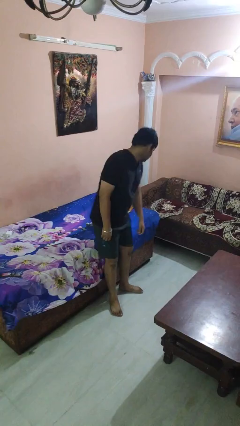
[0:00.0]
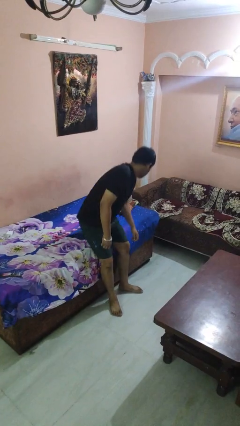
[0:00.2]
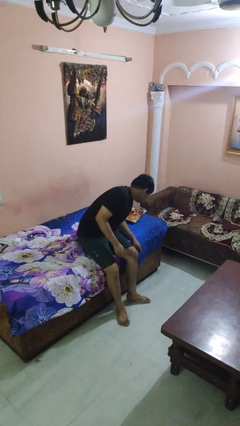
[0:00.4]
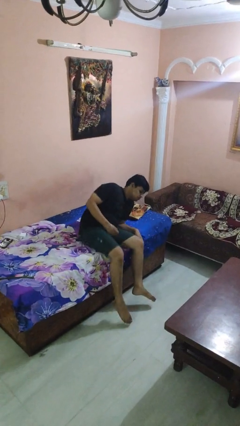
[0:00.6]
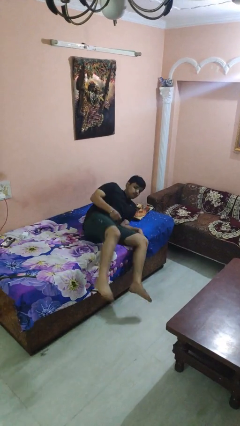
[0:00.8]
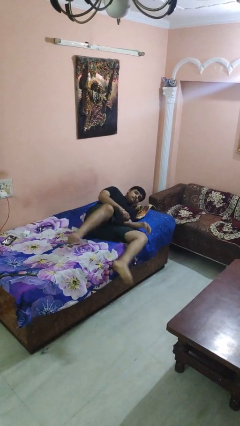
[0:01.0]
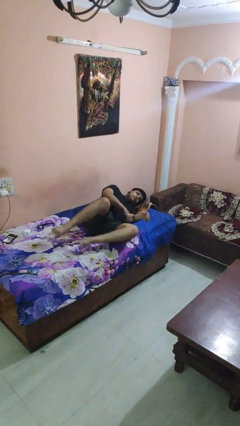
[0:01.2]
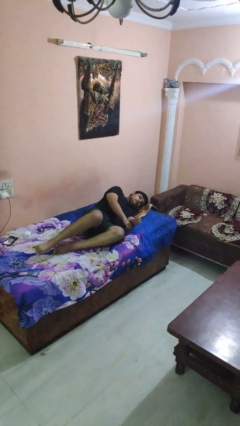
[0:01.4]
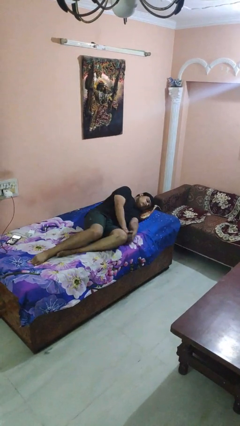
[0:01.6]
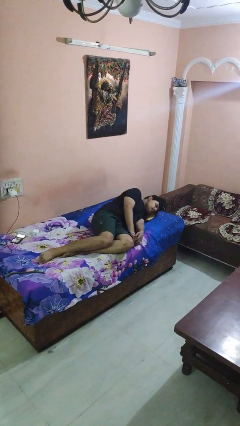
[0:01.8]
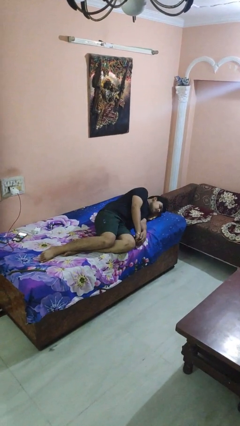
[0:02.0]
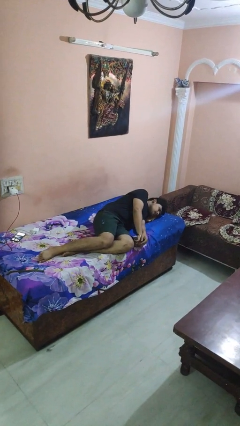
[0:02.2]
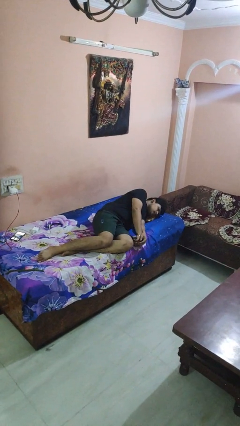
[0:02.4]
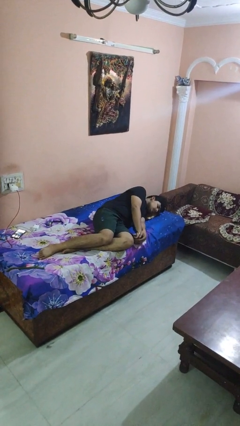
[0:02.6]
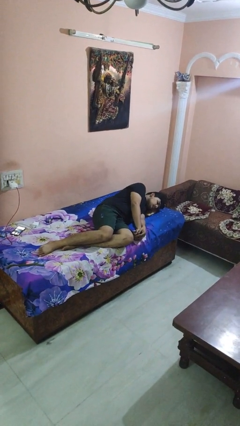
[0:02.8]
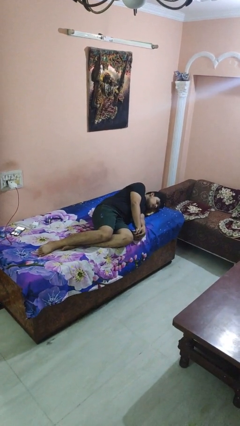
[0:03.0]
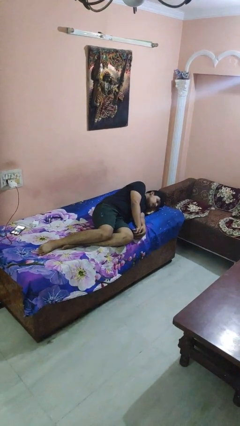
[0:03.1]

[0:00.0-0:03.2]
person lies down on bed

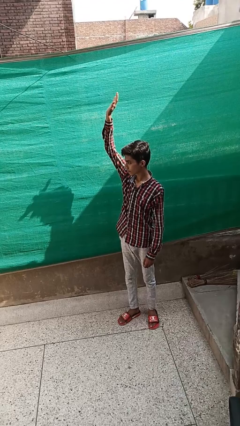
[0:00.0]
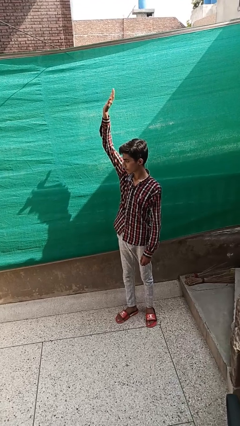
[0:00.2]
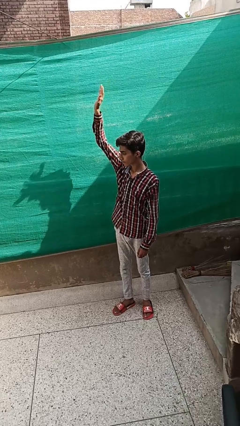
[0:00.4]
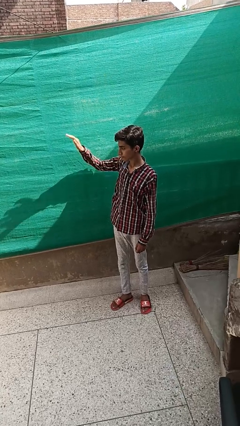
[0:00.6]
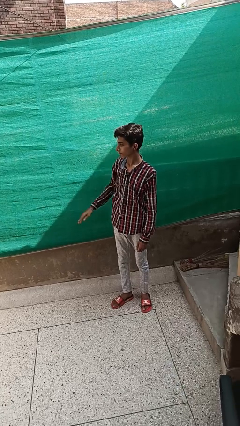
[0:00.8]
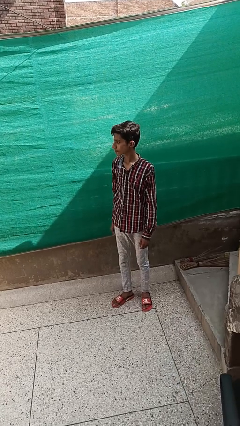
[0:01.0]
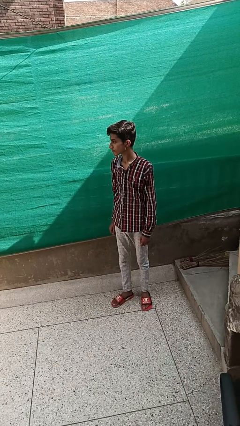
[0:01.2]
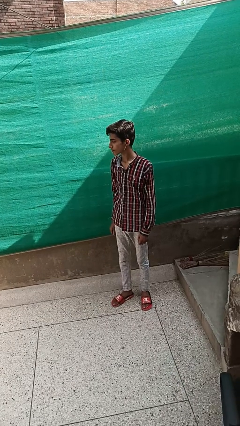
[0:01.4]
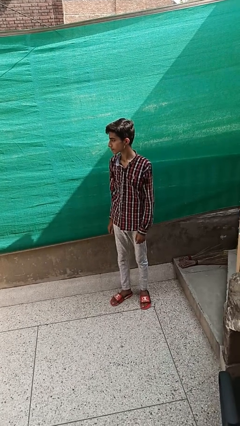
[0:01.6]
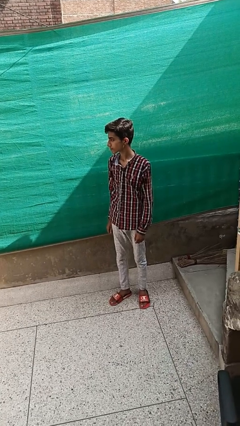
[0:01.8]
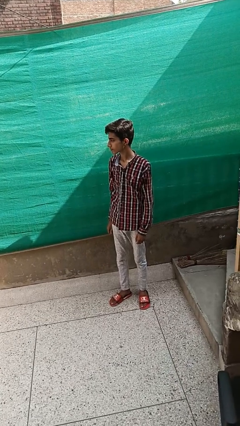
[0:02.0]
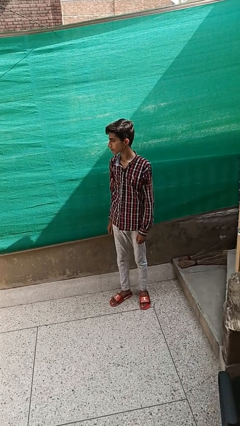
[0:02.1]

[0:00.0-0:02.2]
person gestures lower hand

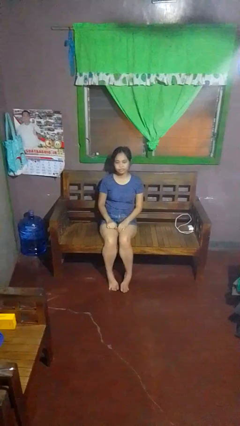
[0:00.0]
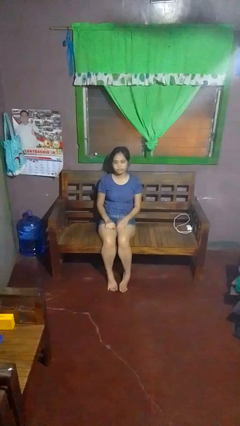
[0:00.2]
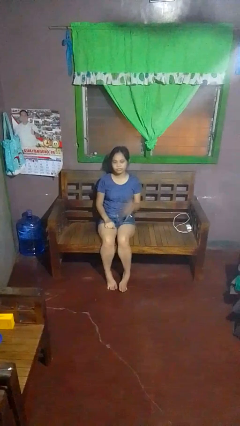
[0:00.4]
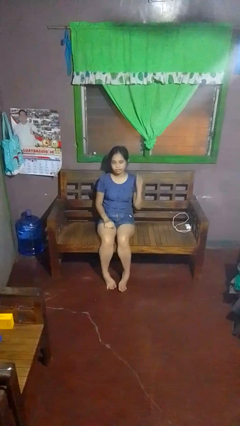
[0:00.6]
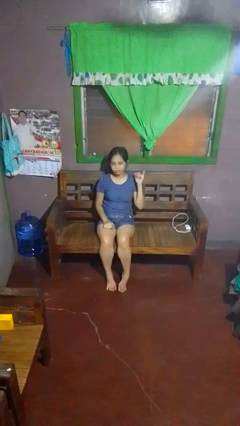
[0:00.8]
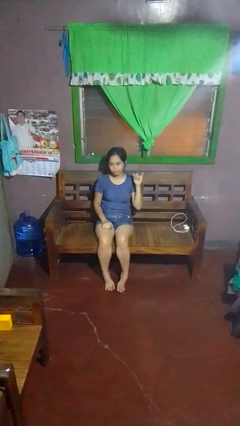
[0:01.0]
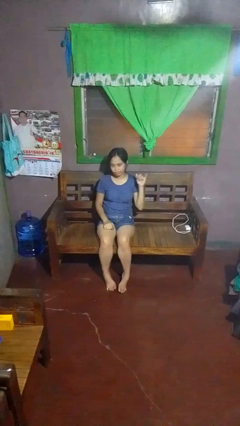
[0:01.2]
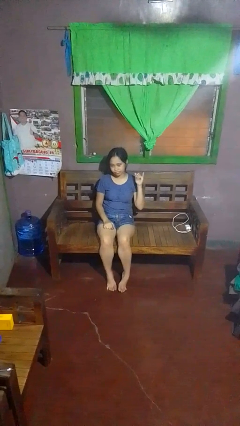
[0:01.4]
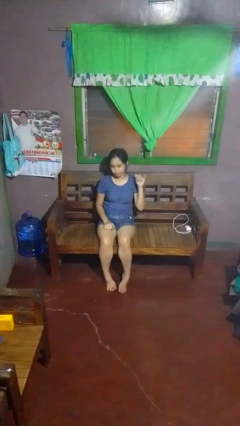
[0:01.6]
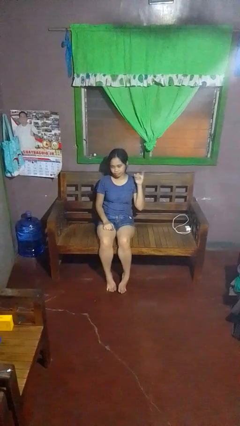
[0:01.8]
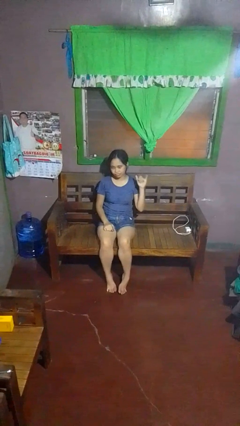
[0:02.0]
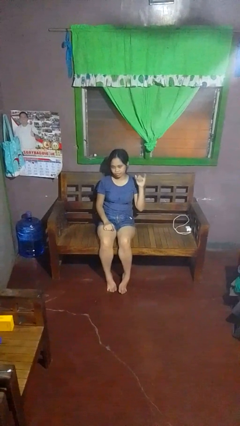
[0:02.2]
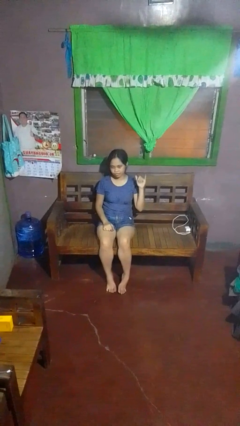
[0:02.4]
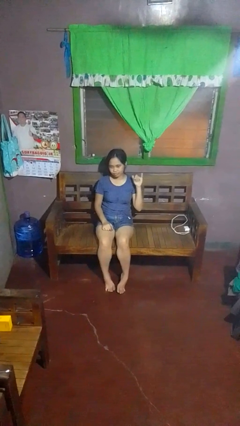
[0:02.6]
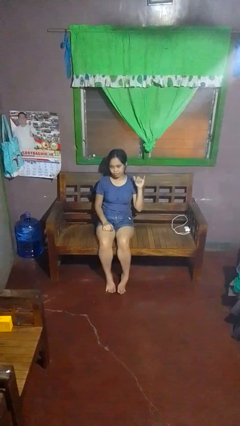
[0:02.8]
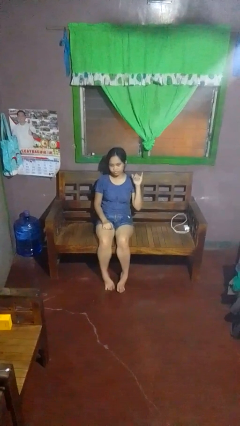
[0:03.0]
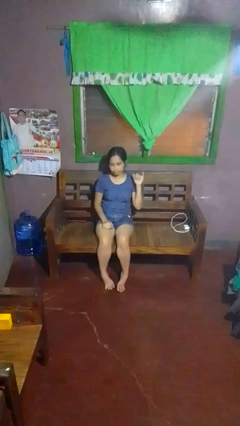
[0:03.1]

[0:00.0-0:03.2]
person gestures hang loose

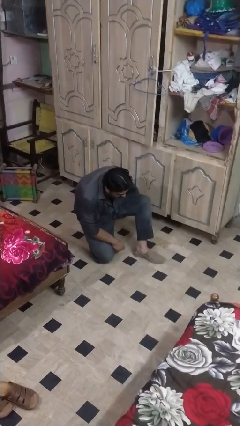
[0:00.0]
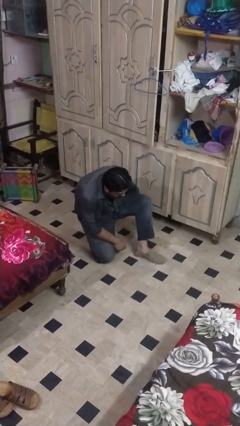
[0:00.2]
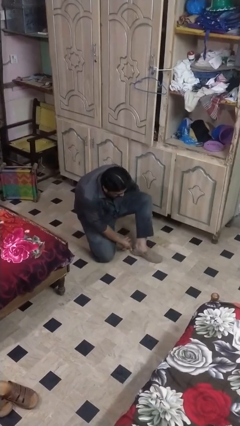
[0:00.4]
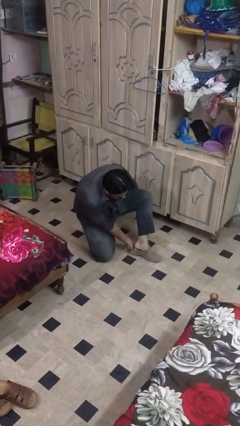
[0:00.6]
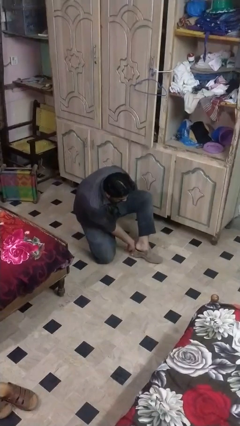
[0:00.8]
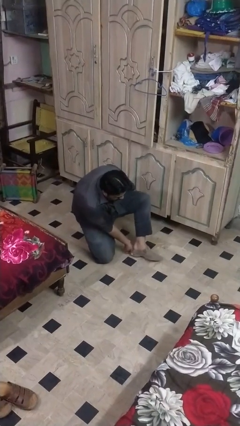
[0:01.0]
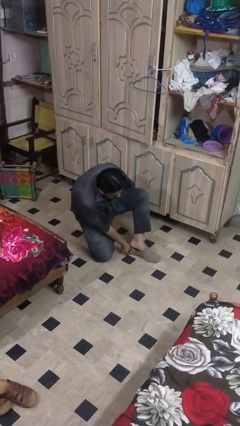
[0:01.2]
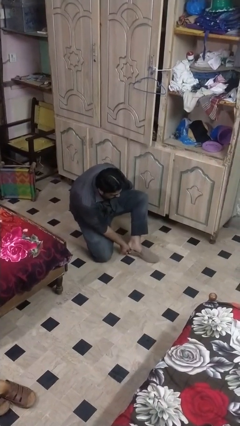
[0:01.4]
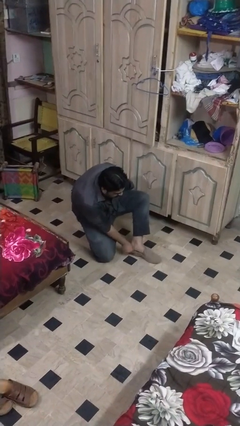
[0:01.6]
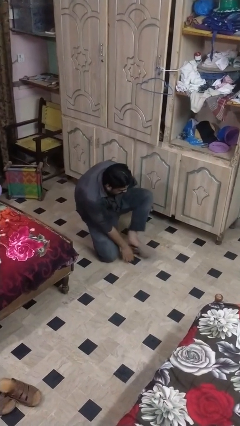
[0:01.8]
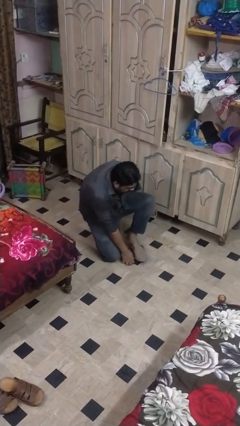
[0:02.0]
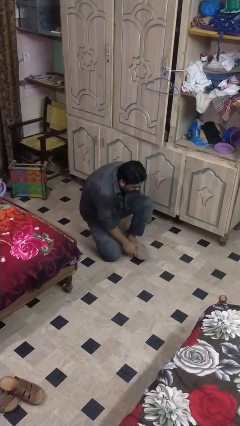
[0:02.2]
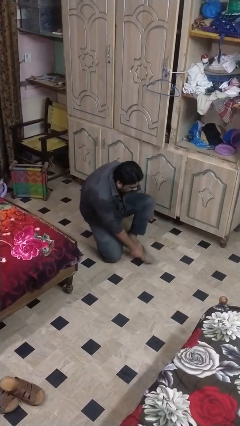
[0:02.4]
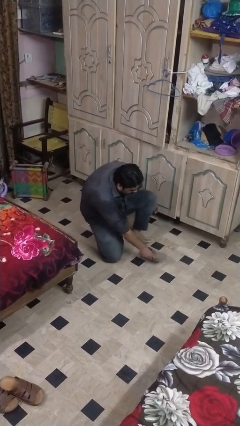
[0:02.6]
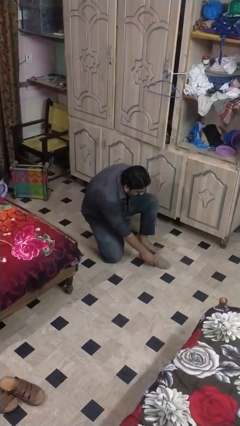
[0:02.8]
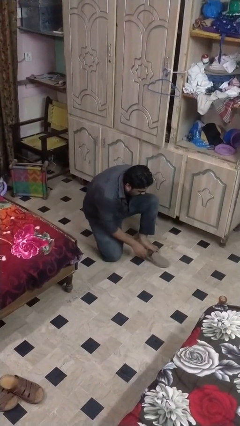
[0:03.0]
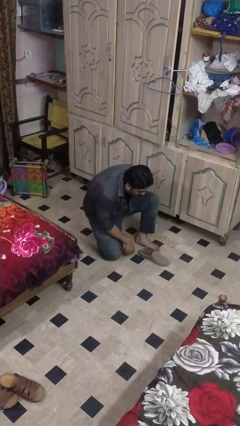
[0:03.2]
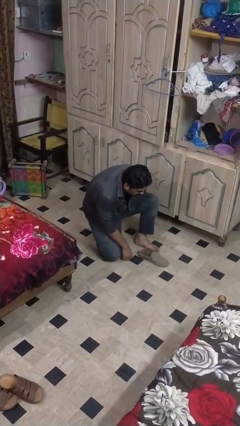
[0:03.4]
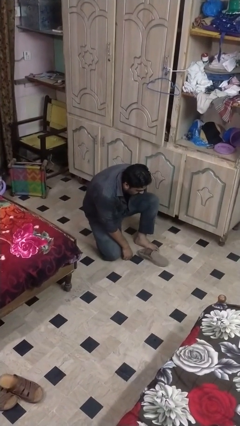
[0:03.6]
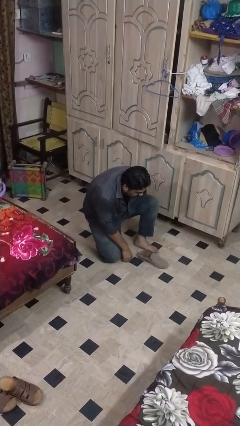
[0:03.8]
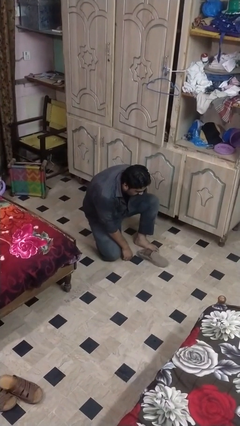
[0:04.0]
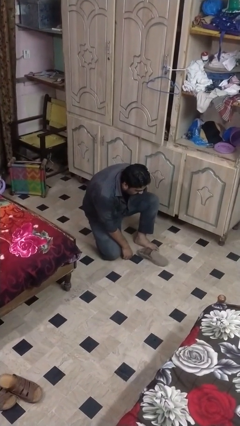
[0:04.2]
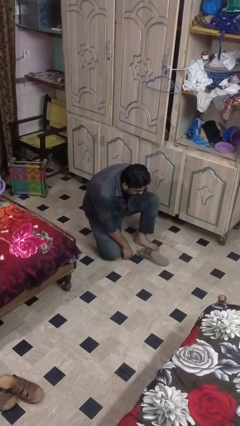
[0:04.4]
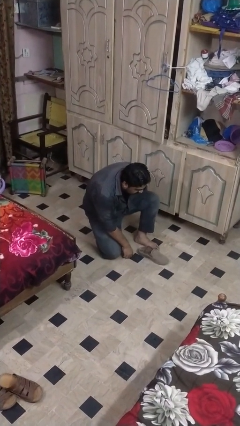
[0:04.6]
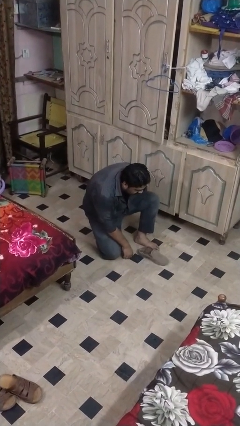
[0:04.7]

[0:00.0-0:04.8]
person takes off boots

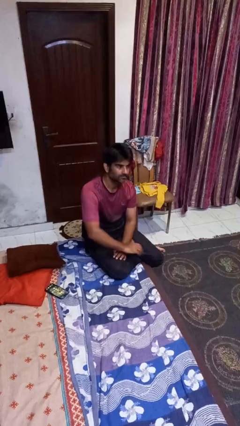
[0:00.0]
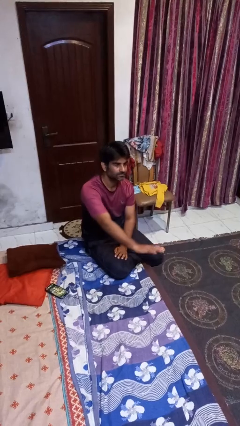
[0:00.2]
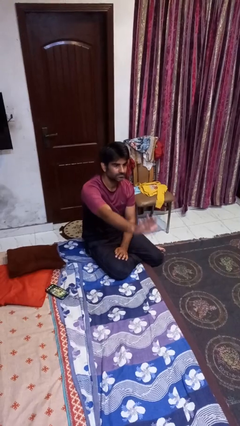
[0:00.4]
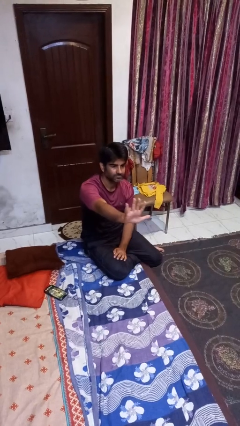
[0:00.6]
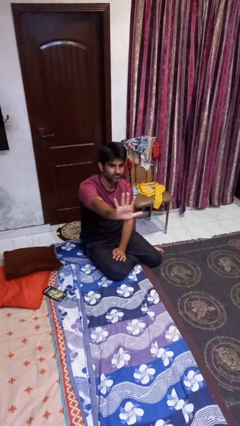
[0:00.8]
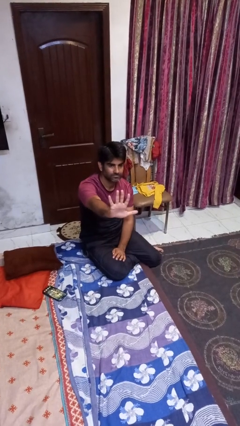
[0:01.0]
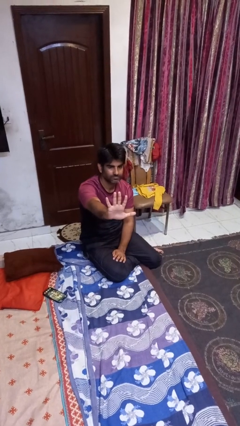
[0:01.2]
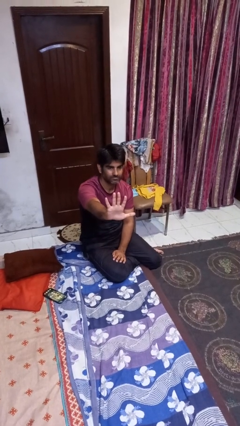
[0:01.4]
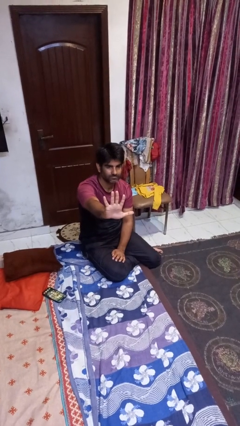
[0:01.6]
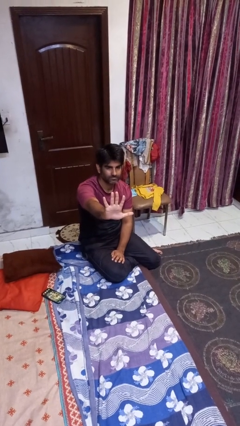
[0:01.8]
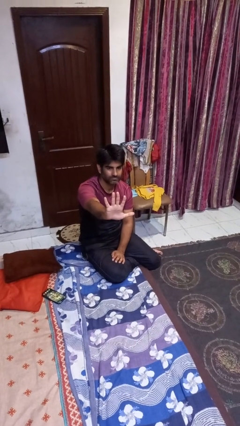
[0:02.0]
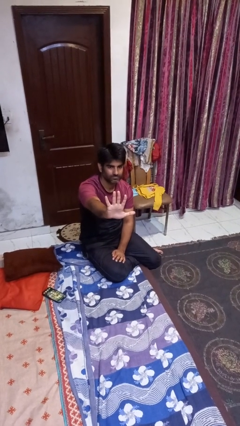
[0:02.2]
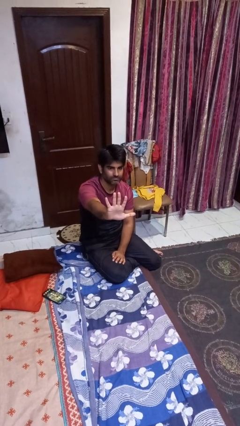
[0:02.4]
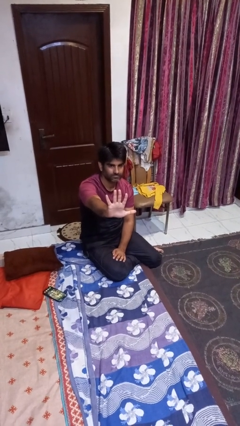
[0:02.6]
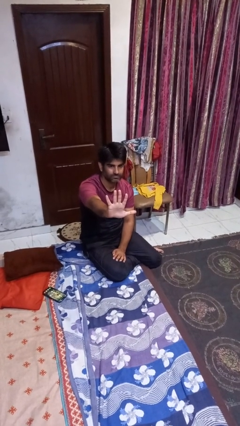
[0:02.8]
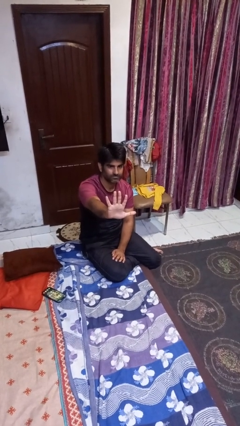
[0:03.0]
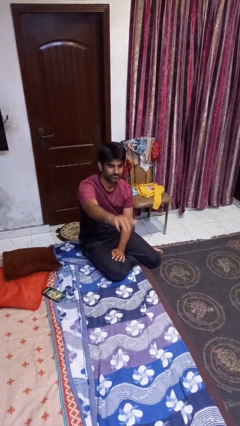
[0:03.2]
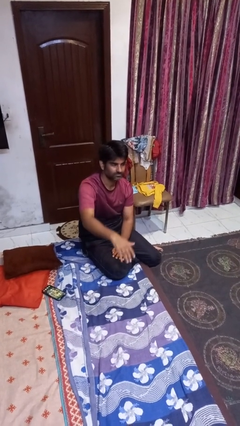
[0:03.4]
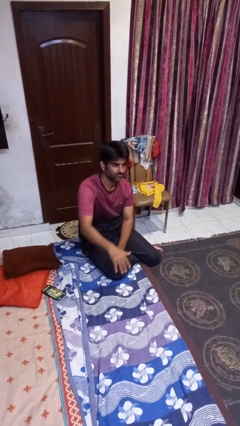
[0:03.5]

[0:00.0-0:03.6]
person gestures number five

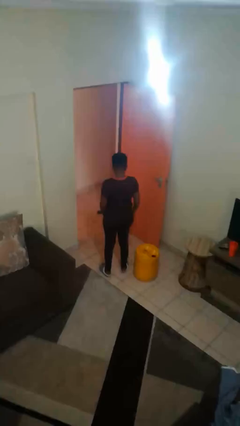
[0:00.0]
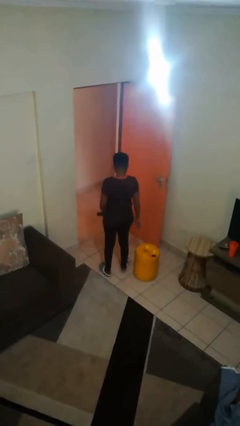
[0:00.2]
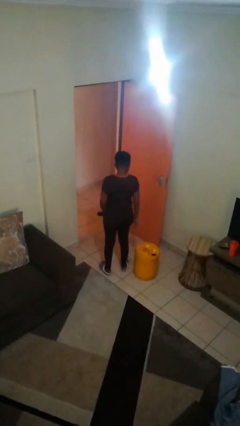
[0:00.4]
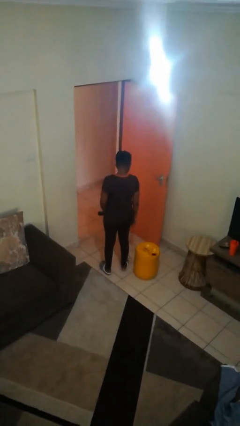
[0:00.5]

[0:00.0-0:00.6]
person puts on headphones

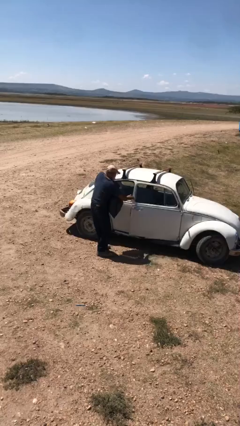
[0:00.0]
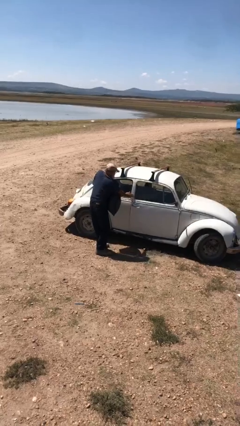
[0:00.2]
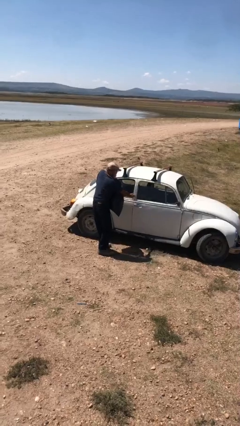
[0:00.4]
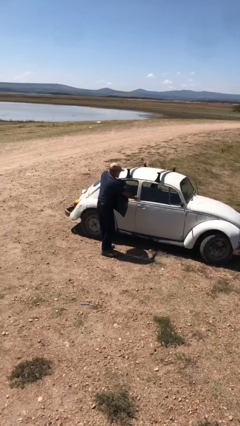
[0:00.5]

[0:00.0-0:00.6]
person closes car door
